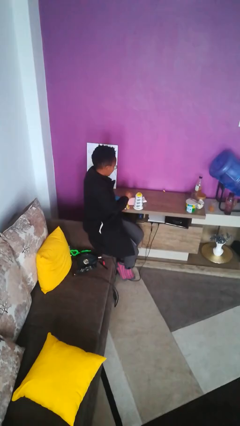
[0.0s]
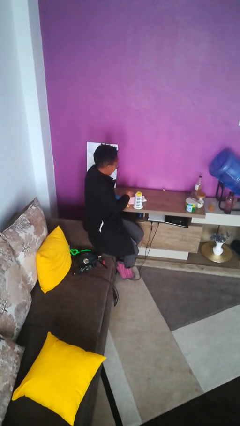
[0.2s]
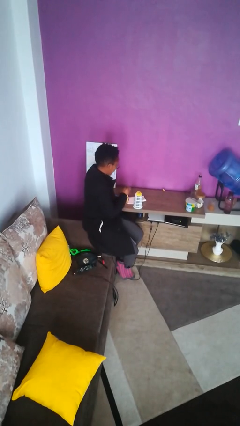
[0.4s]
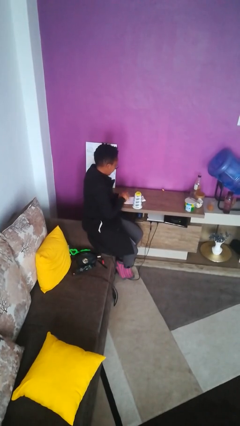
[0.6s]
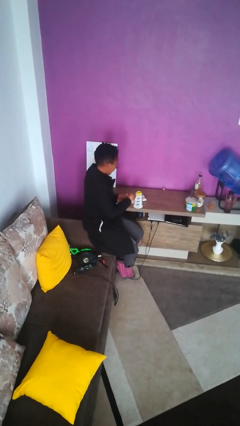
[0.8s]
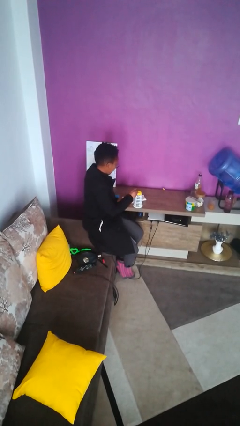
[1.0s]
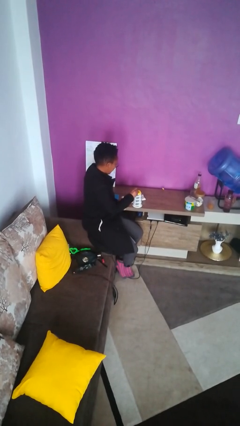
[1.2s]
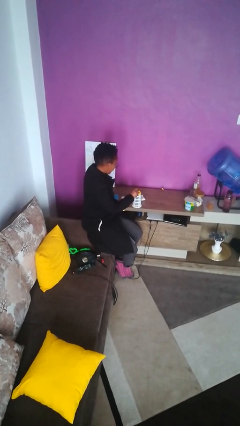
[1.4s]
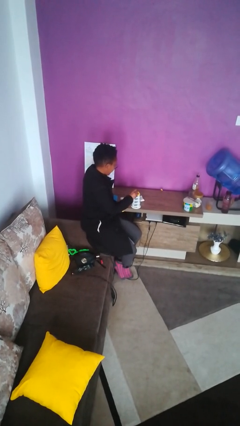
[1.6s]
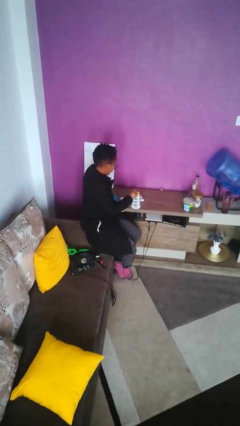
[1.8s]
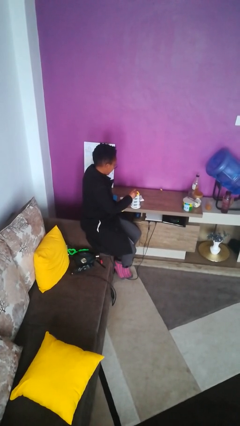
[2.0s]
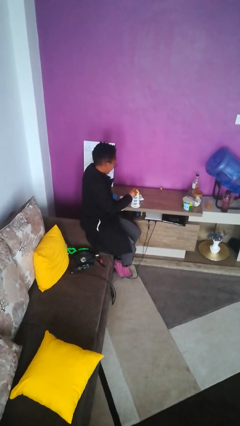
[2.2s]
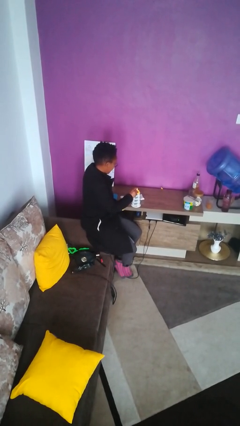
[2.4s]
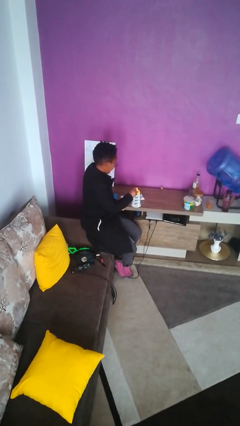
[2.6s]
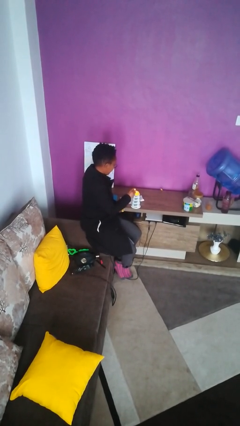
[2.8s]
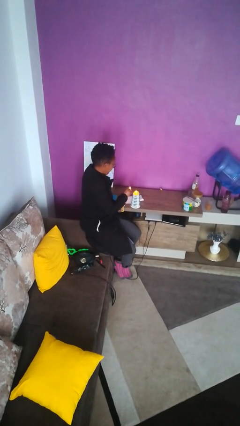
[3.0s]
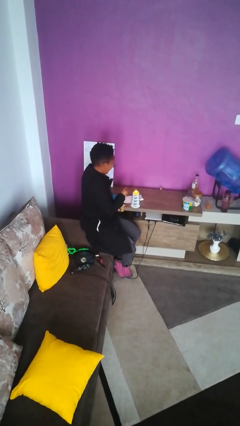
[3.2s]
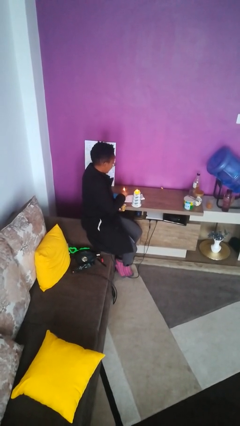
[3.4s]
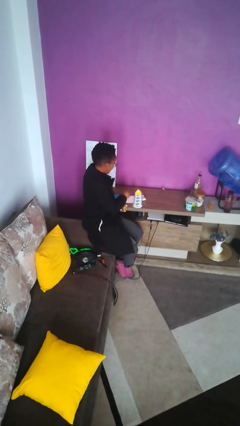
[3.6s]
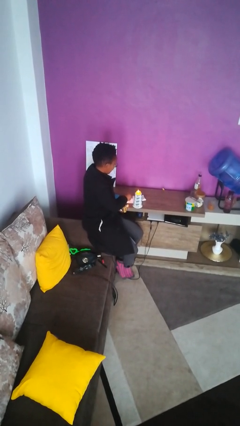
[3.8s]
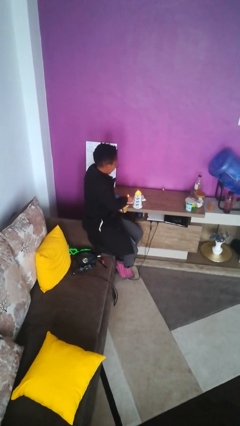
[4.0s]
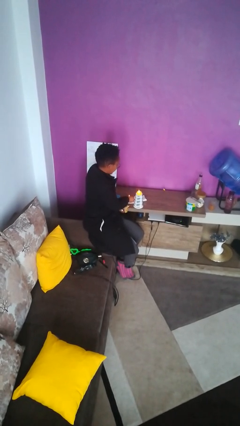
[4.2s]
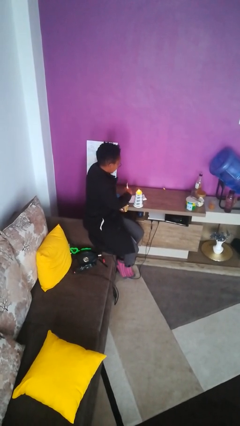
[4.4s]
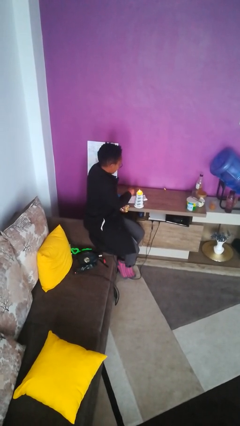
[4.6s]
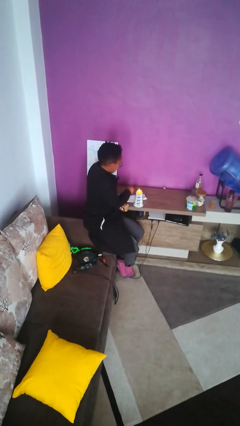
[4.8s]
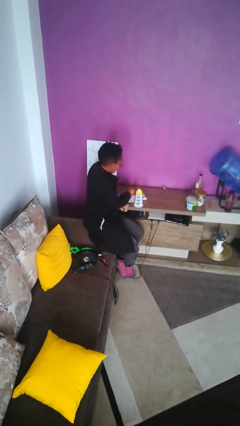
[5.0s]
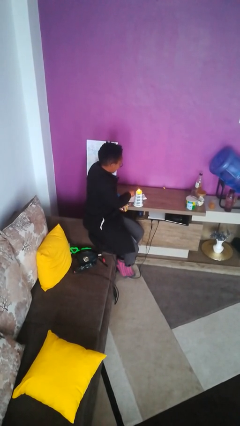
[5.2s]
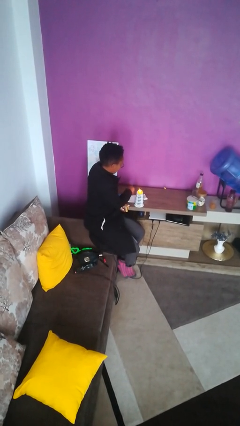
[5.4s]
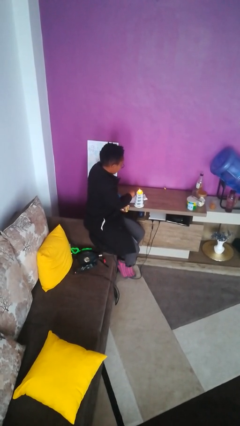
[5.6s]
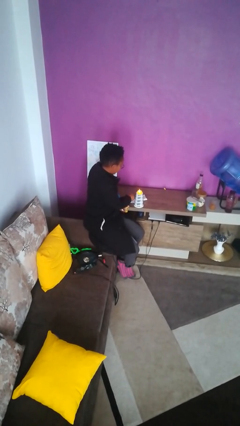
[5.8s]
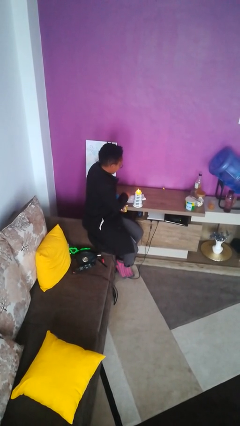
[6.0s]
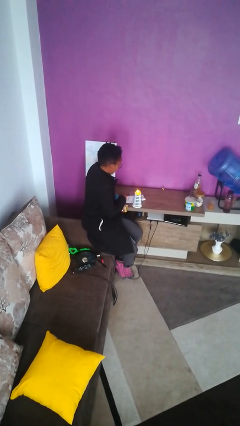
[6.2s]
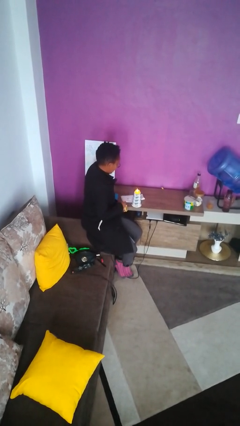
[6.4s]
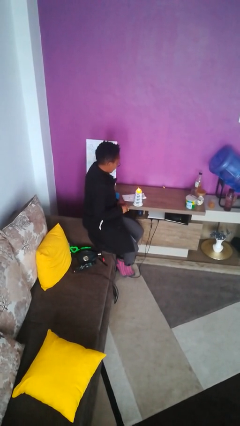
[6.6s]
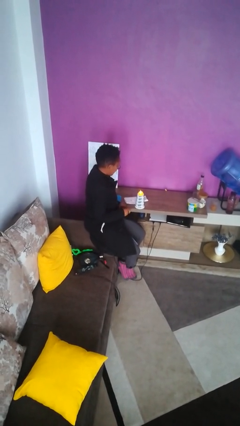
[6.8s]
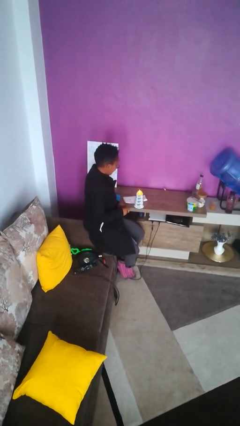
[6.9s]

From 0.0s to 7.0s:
person lights candle

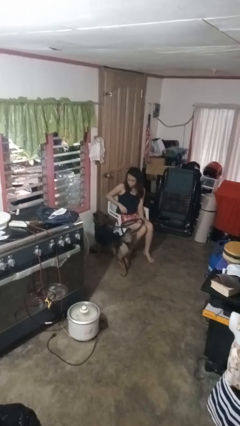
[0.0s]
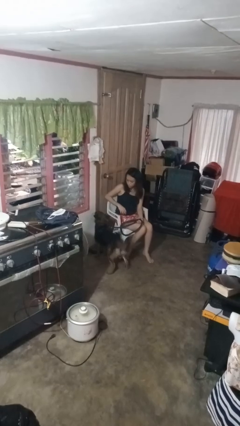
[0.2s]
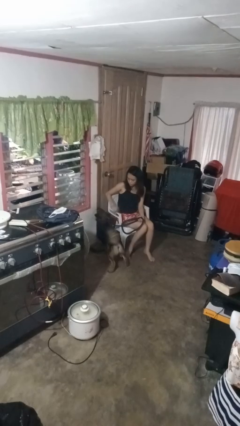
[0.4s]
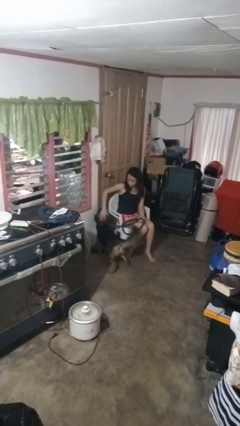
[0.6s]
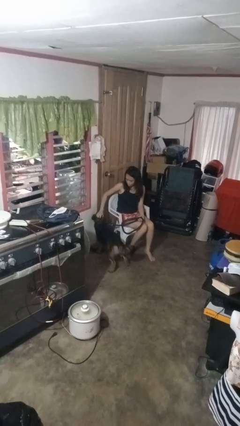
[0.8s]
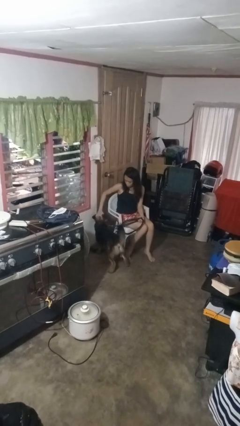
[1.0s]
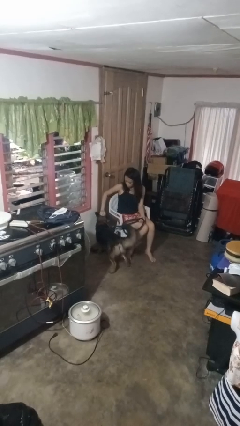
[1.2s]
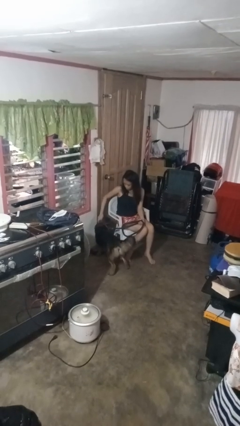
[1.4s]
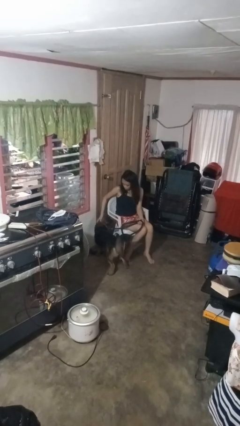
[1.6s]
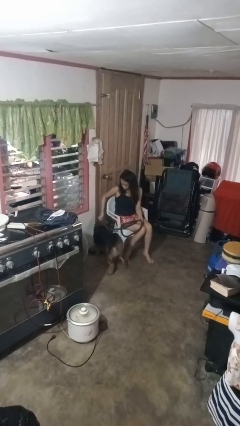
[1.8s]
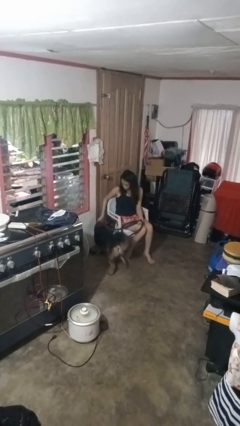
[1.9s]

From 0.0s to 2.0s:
person pets dog

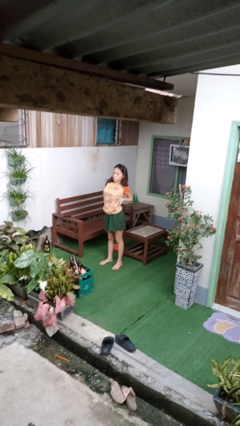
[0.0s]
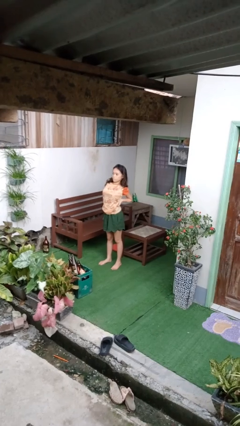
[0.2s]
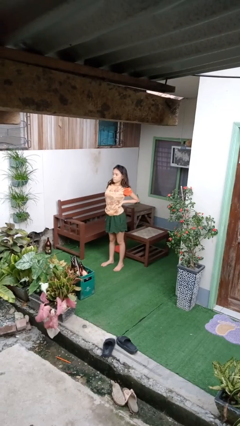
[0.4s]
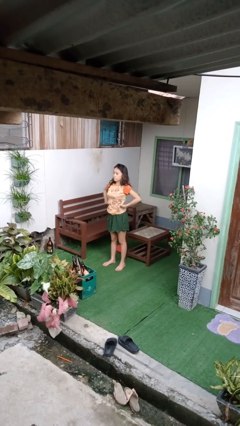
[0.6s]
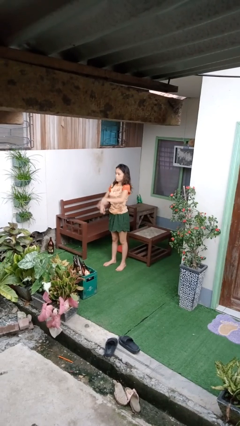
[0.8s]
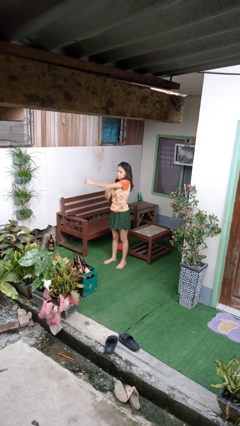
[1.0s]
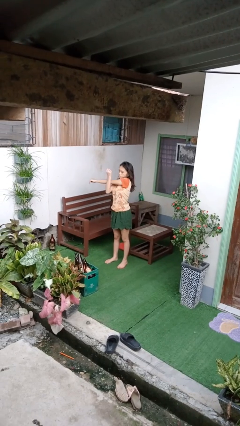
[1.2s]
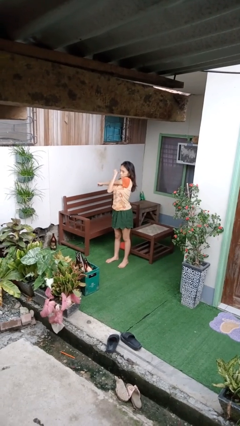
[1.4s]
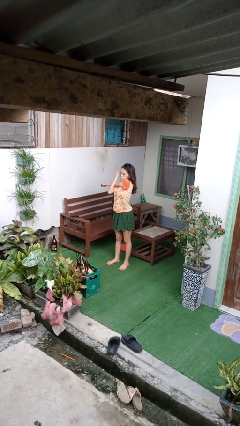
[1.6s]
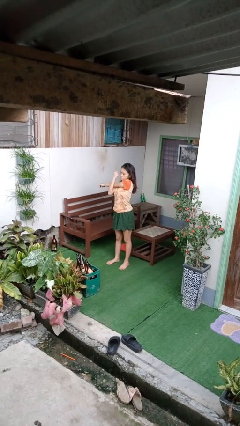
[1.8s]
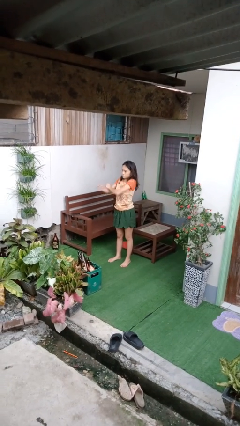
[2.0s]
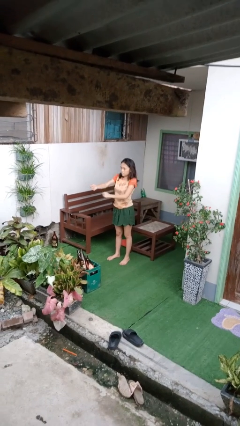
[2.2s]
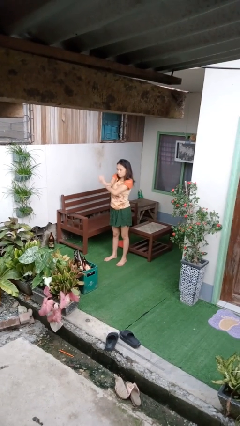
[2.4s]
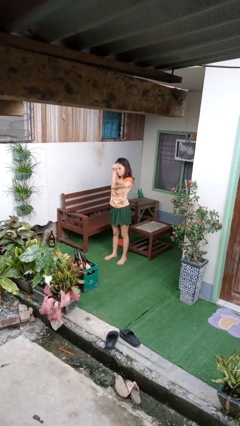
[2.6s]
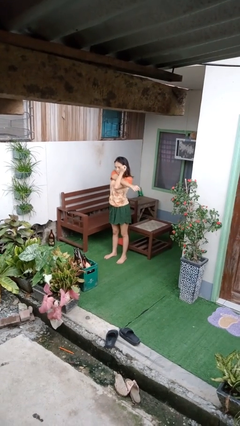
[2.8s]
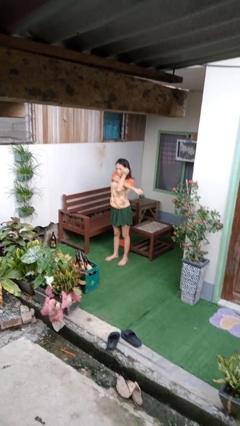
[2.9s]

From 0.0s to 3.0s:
person stretches arms to side

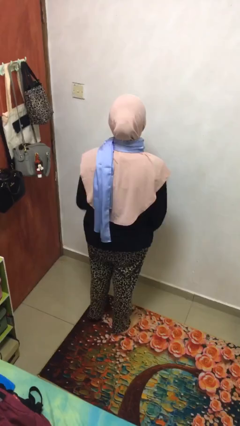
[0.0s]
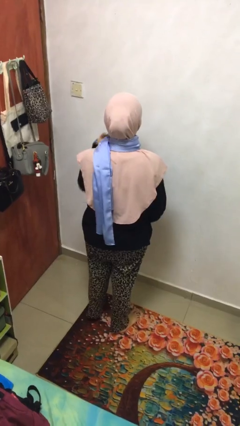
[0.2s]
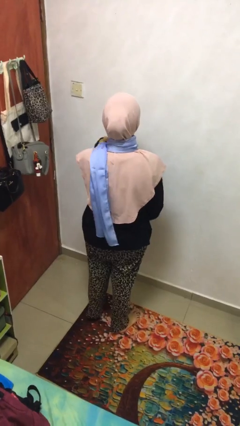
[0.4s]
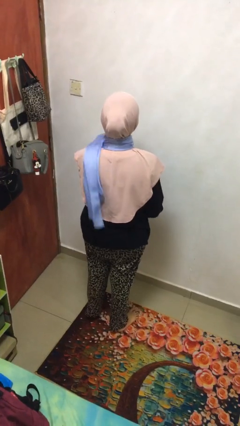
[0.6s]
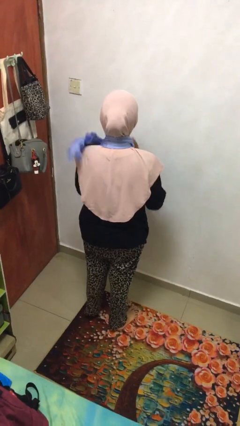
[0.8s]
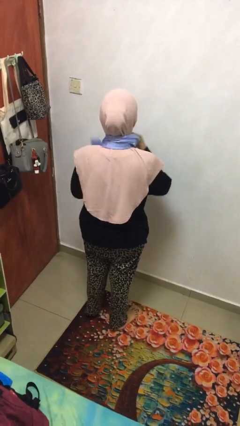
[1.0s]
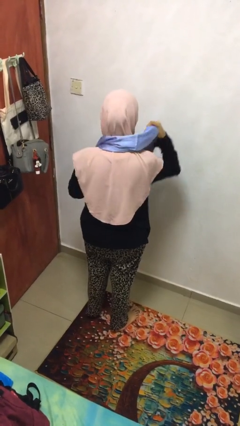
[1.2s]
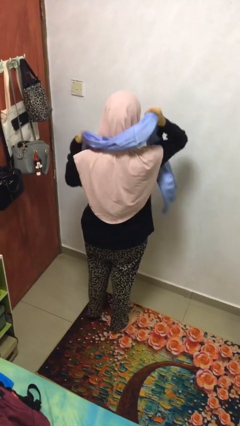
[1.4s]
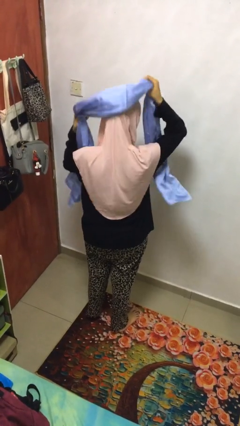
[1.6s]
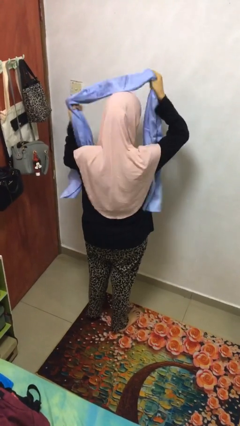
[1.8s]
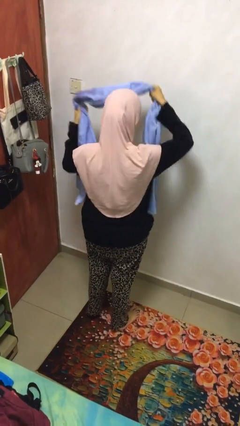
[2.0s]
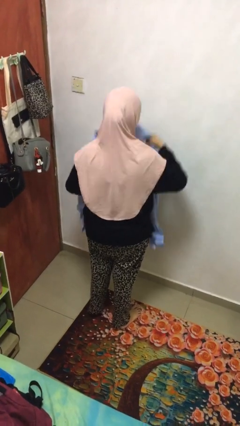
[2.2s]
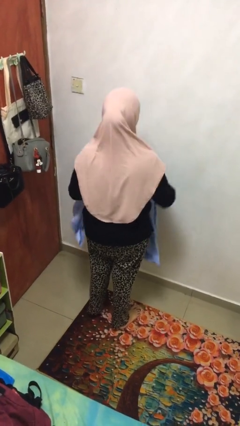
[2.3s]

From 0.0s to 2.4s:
person takes off scarf

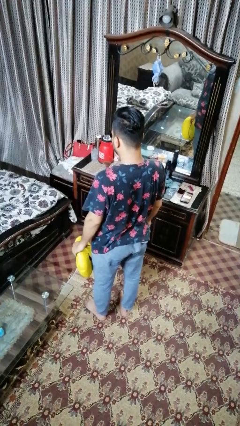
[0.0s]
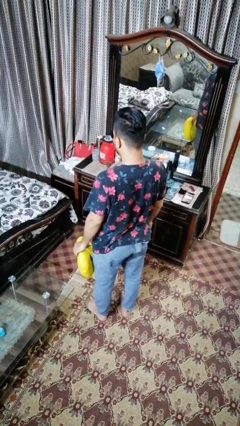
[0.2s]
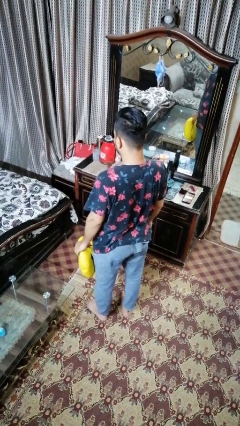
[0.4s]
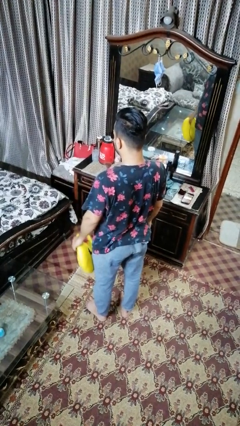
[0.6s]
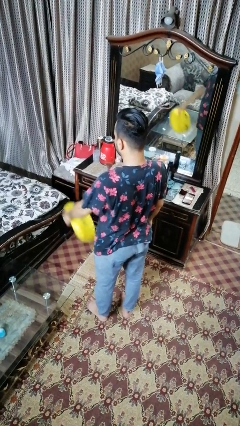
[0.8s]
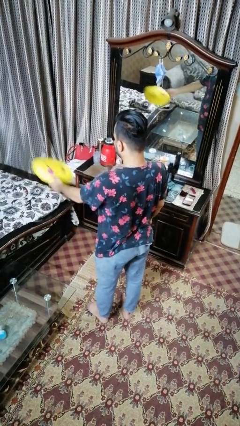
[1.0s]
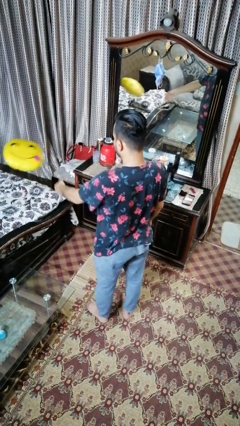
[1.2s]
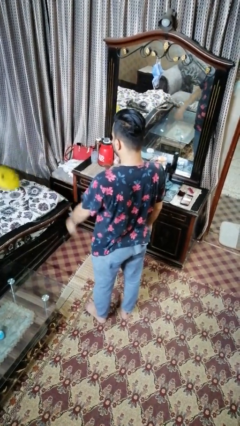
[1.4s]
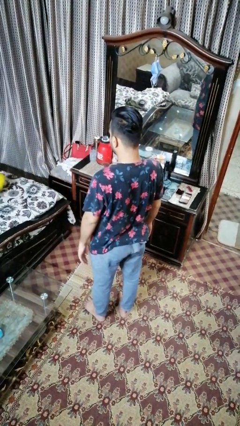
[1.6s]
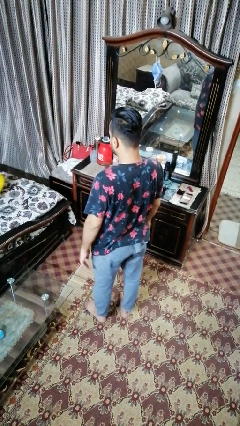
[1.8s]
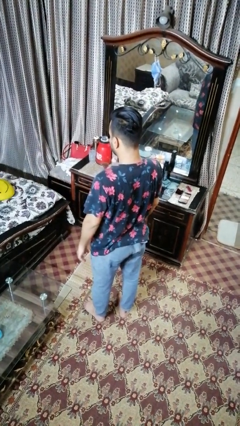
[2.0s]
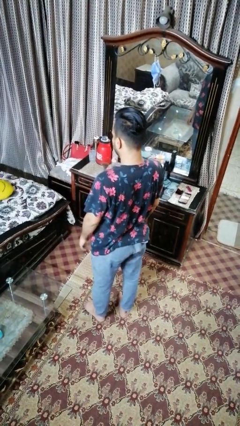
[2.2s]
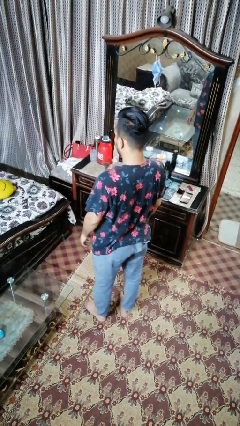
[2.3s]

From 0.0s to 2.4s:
person throws object on bed

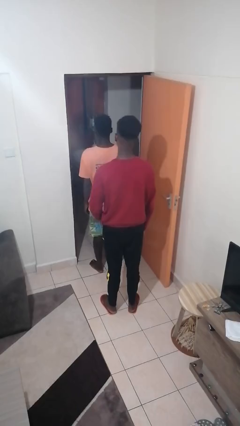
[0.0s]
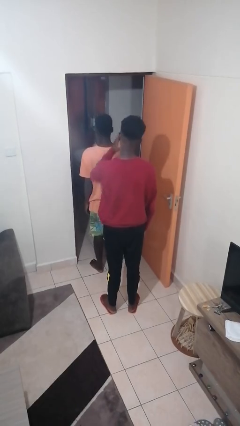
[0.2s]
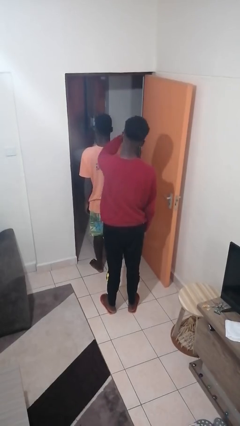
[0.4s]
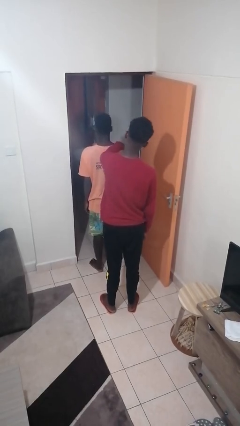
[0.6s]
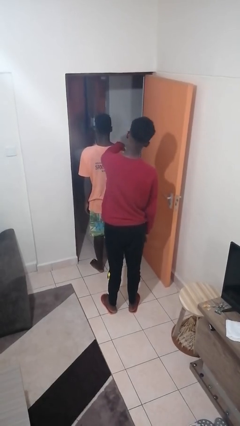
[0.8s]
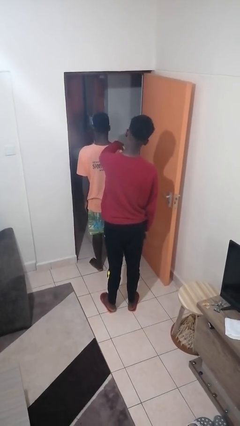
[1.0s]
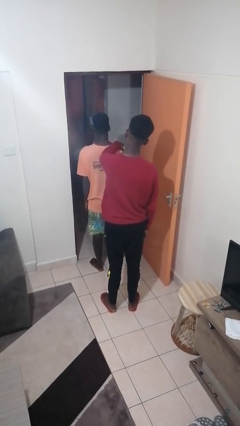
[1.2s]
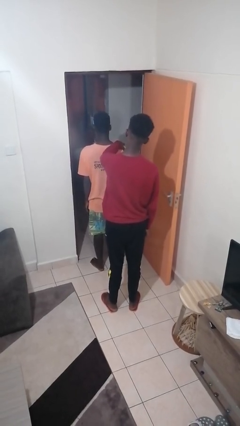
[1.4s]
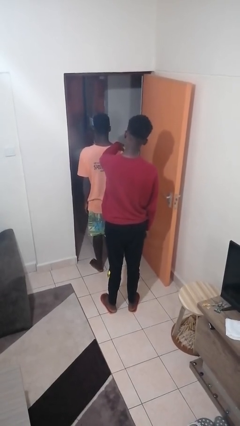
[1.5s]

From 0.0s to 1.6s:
person grabs person by shoulder
